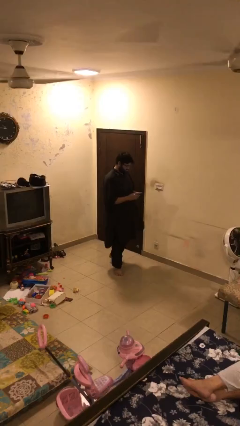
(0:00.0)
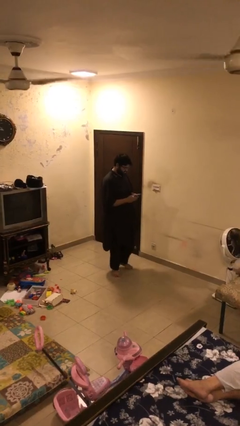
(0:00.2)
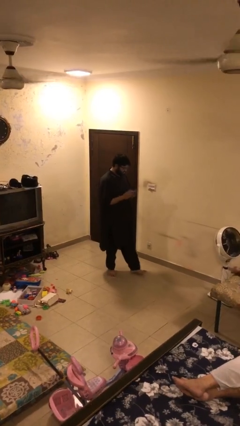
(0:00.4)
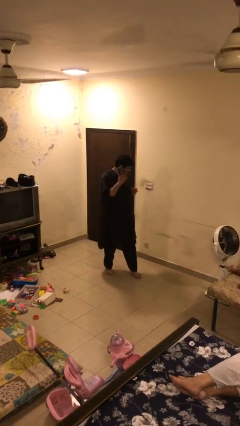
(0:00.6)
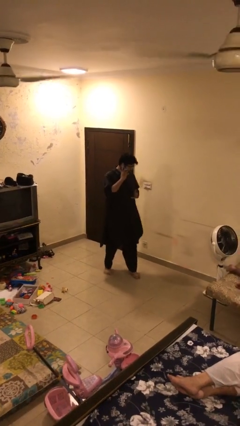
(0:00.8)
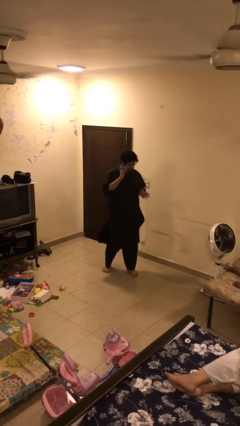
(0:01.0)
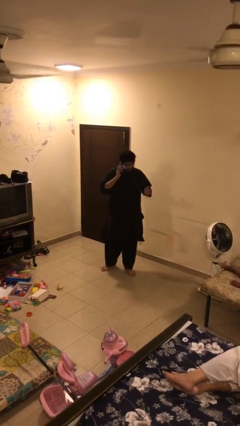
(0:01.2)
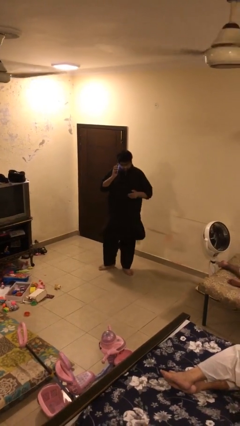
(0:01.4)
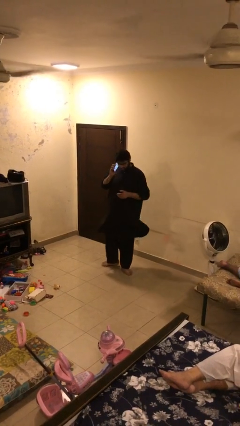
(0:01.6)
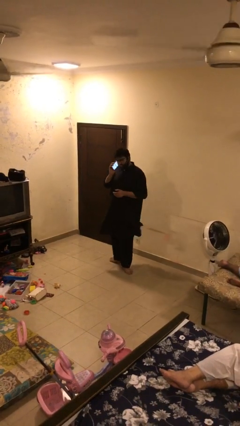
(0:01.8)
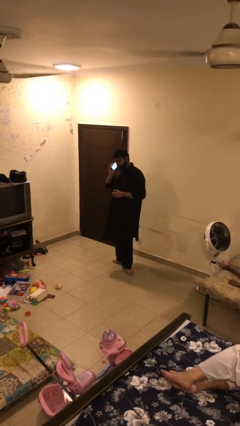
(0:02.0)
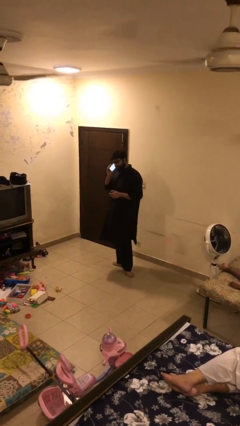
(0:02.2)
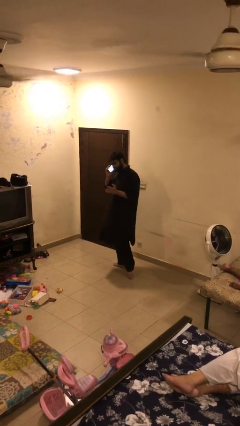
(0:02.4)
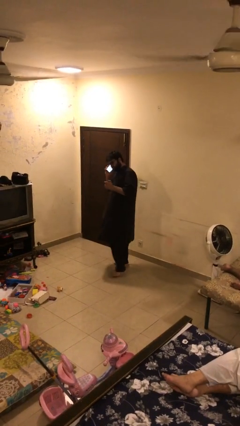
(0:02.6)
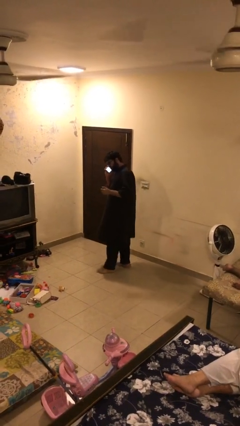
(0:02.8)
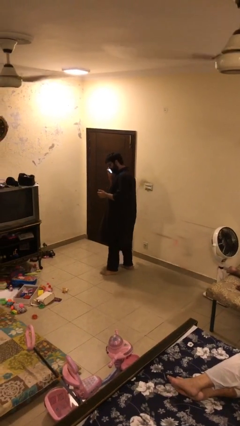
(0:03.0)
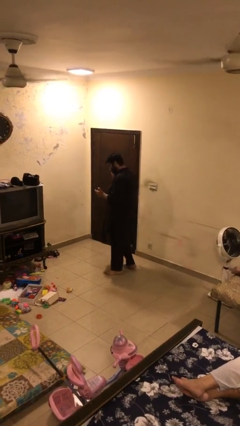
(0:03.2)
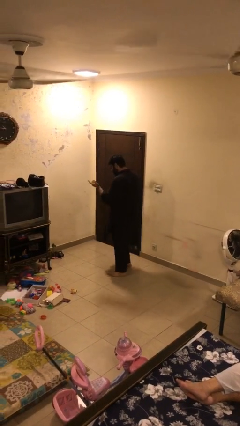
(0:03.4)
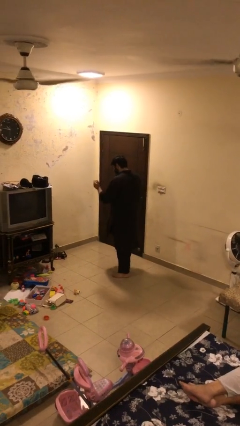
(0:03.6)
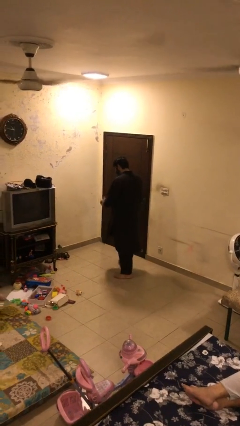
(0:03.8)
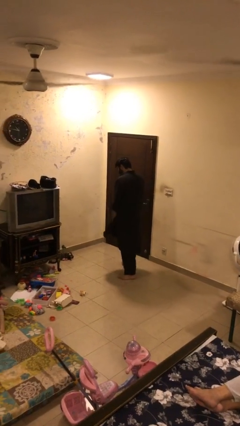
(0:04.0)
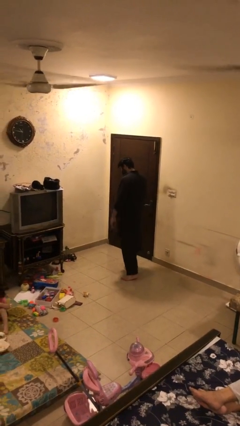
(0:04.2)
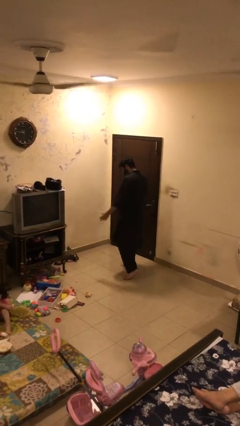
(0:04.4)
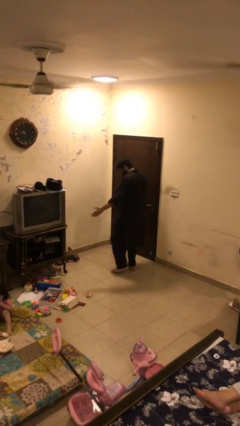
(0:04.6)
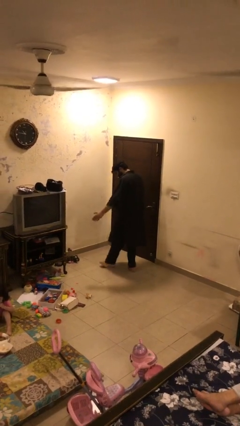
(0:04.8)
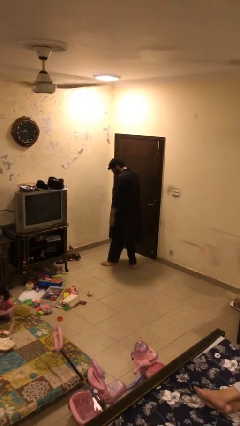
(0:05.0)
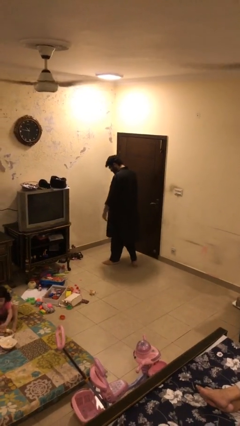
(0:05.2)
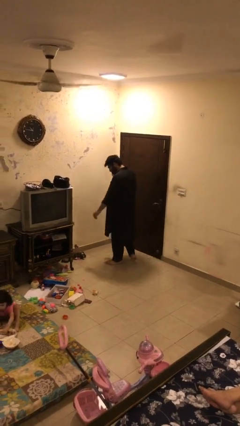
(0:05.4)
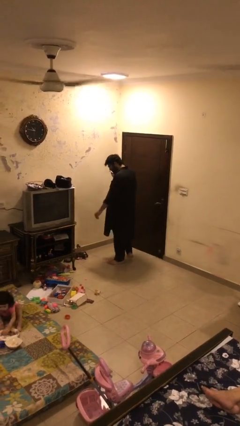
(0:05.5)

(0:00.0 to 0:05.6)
person talks on phone

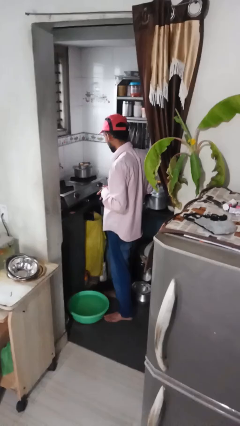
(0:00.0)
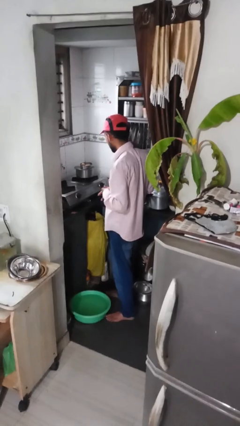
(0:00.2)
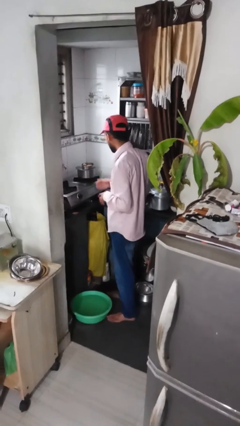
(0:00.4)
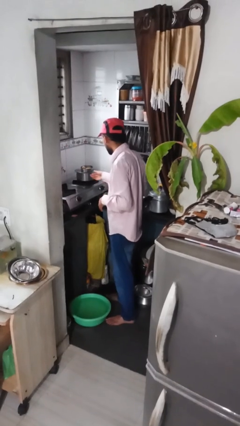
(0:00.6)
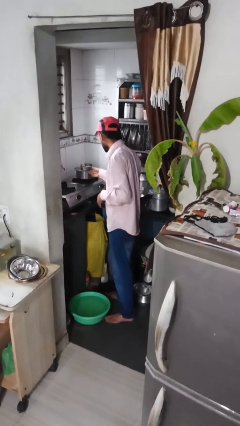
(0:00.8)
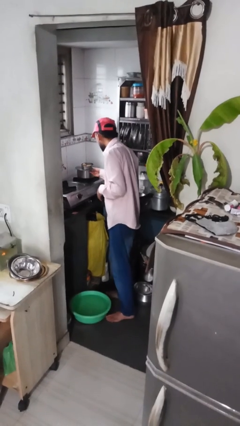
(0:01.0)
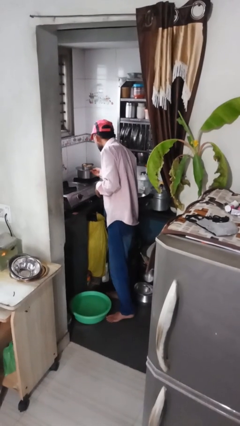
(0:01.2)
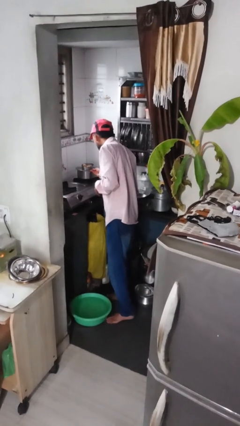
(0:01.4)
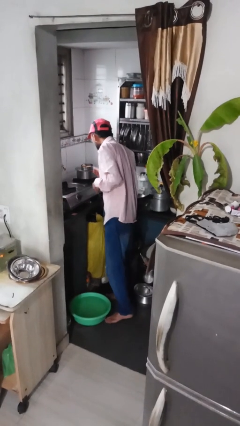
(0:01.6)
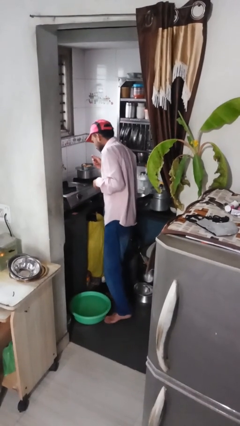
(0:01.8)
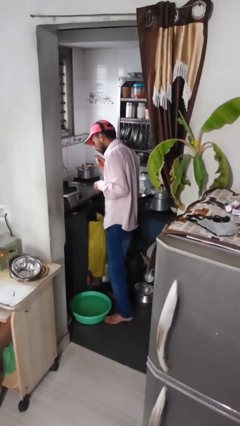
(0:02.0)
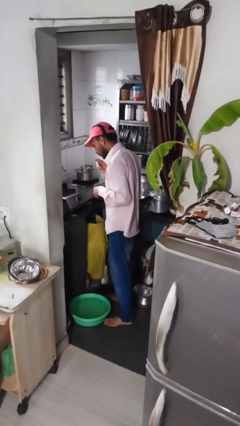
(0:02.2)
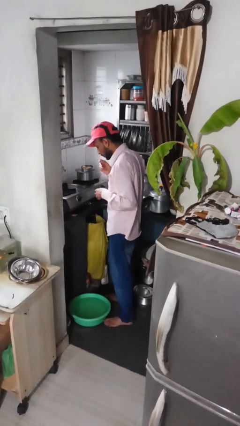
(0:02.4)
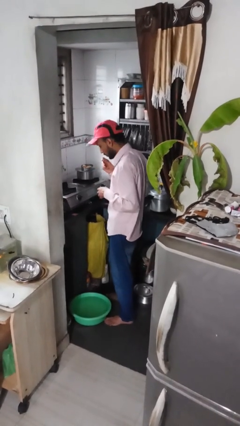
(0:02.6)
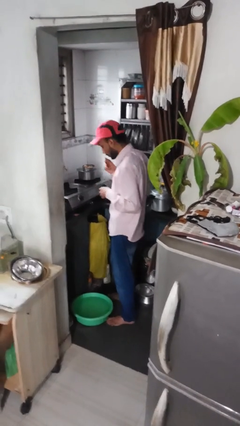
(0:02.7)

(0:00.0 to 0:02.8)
person burns hand

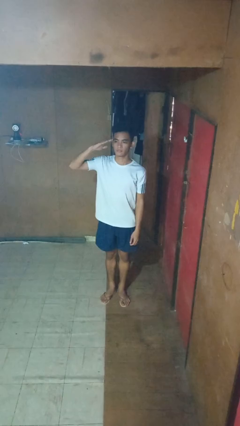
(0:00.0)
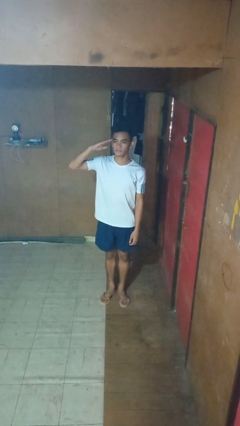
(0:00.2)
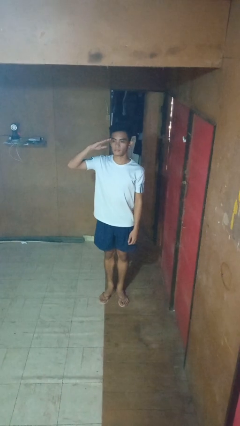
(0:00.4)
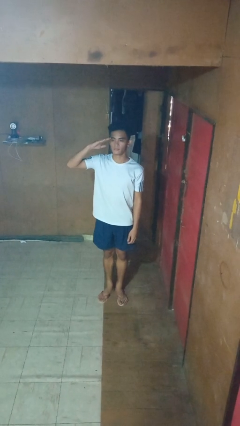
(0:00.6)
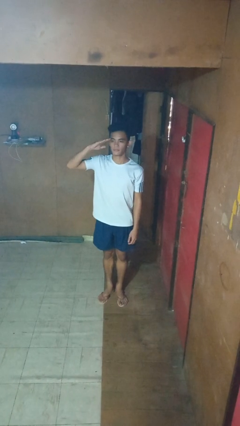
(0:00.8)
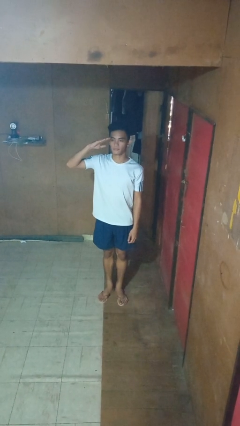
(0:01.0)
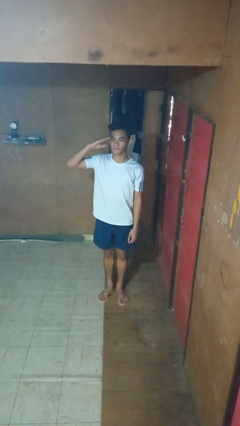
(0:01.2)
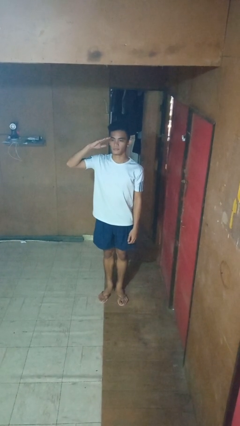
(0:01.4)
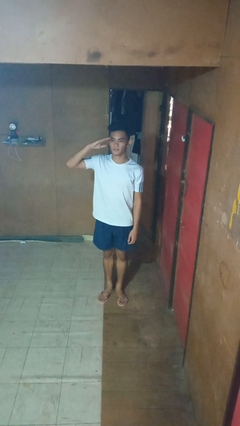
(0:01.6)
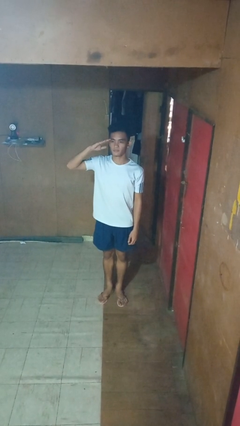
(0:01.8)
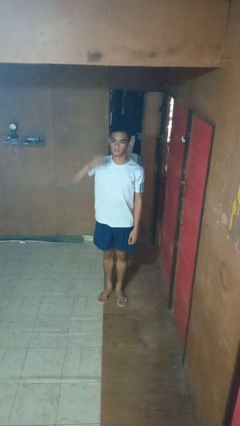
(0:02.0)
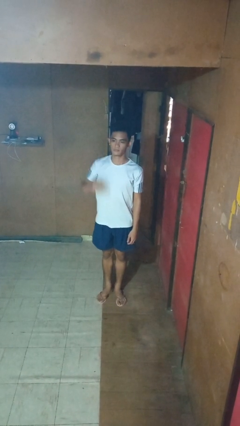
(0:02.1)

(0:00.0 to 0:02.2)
person salutes

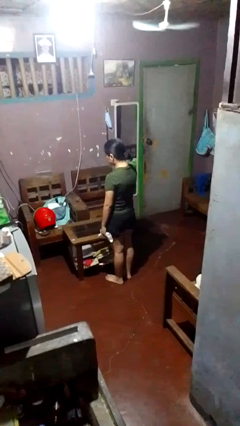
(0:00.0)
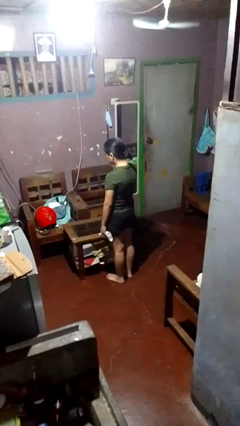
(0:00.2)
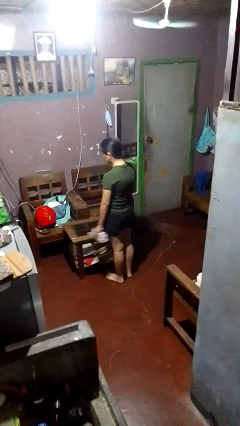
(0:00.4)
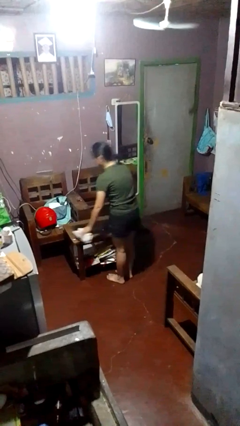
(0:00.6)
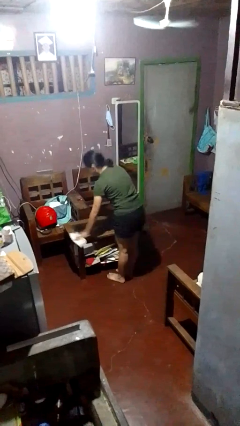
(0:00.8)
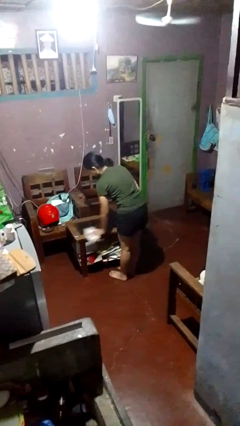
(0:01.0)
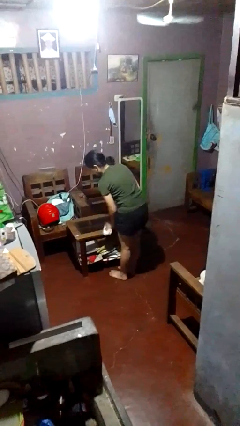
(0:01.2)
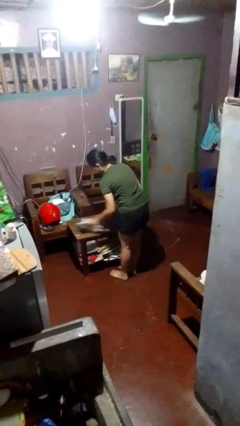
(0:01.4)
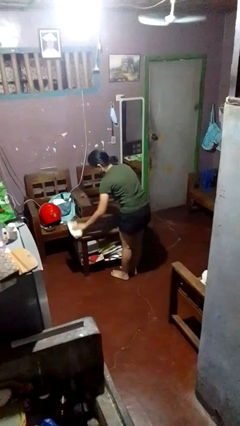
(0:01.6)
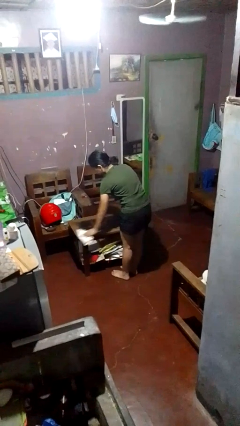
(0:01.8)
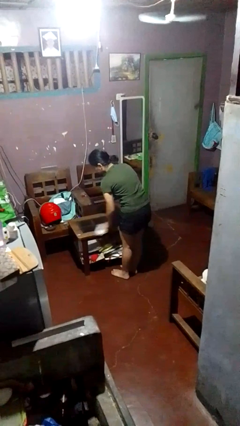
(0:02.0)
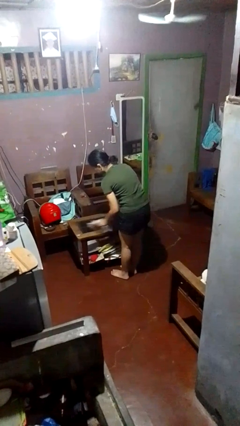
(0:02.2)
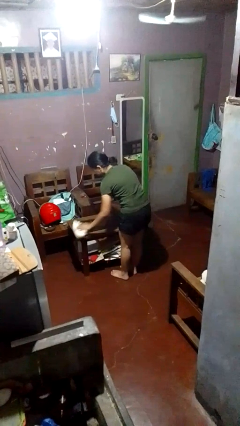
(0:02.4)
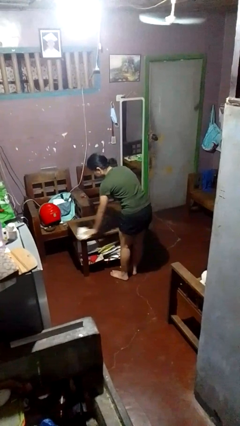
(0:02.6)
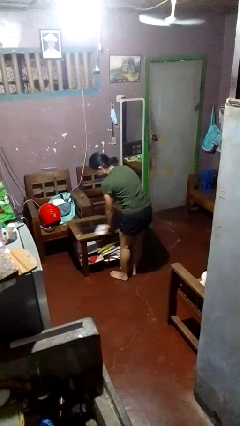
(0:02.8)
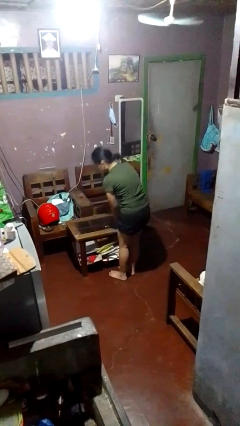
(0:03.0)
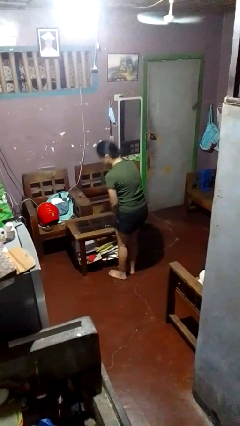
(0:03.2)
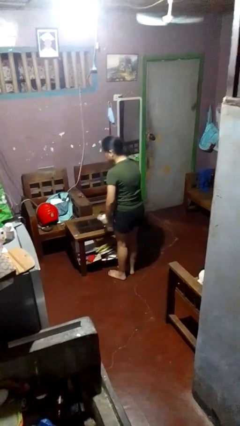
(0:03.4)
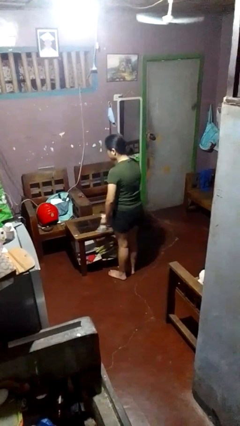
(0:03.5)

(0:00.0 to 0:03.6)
person cleans table with rag

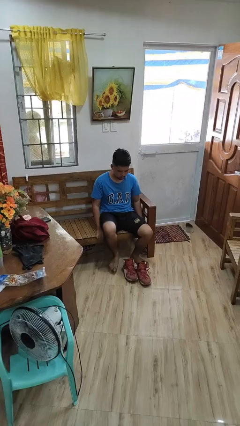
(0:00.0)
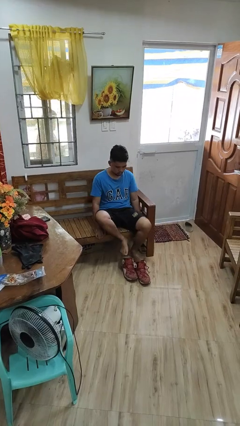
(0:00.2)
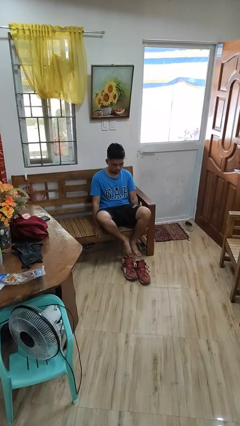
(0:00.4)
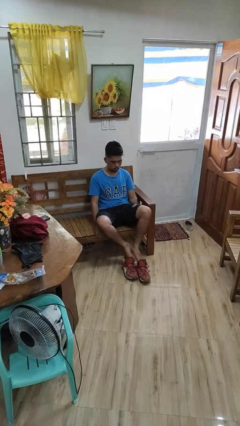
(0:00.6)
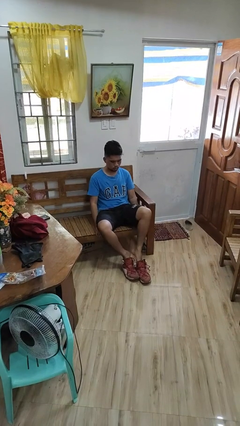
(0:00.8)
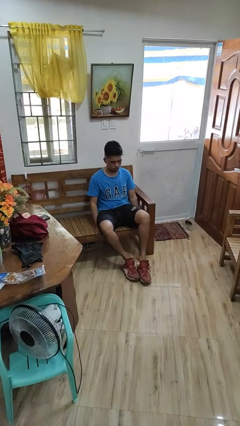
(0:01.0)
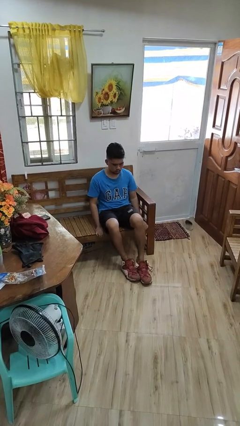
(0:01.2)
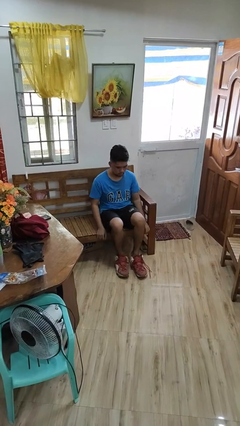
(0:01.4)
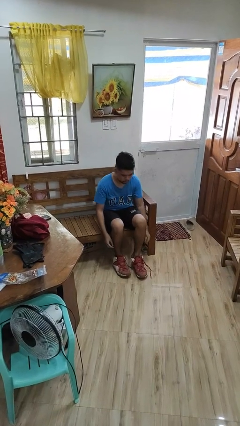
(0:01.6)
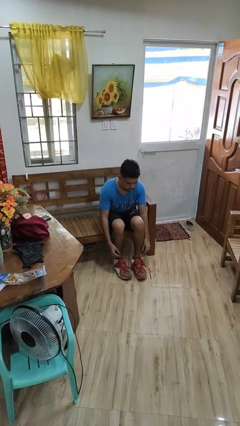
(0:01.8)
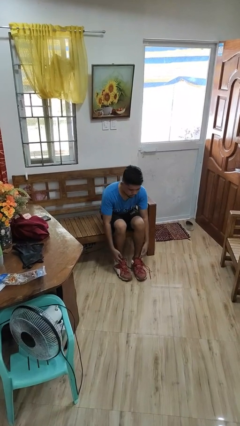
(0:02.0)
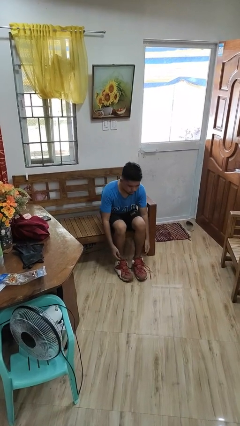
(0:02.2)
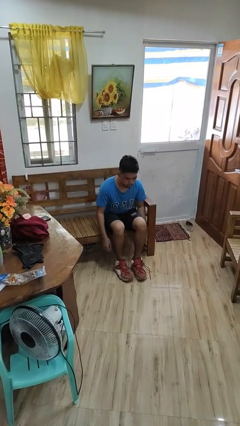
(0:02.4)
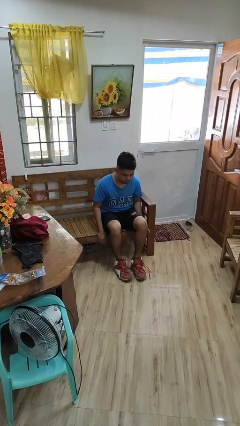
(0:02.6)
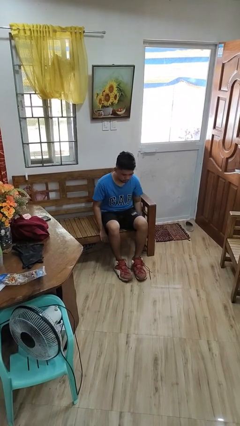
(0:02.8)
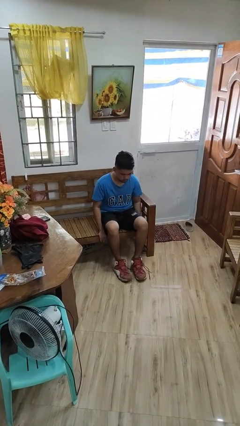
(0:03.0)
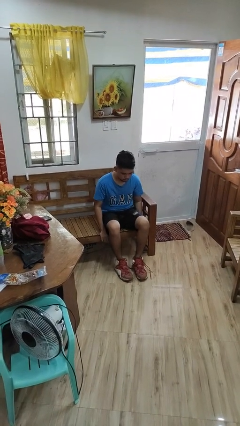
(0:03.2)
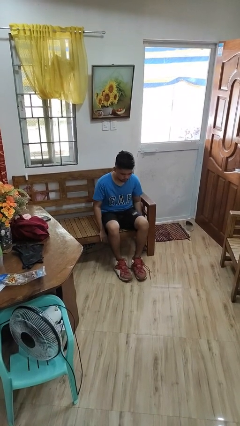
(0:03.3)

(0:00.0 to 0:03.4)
person puts on shoes

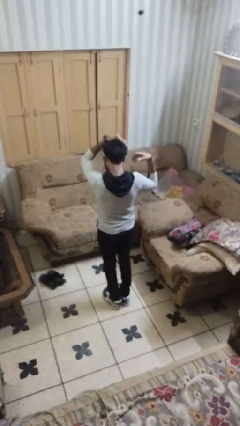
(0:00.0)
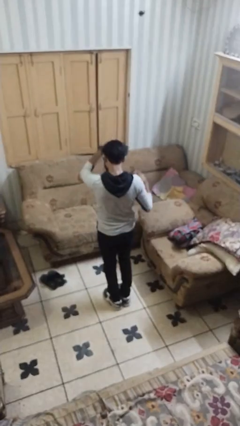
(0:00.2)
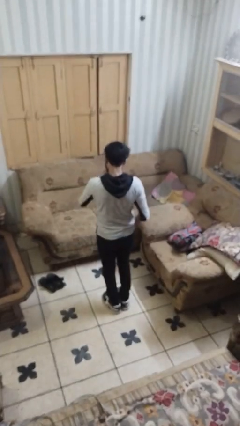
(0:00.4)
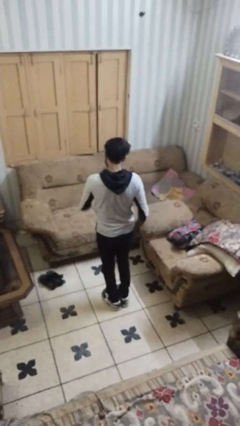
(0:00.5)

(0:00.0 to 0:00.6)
person jumps
